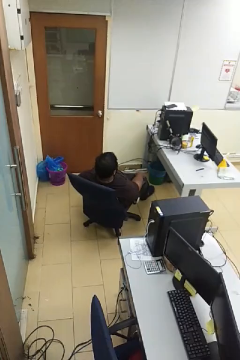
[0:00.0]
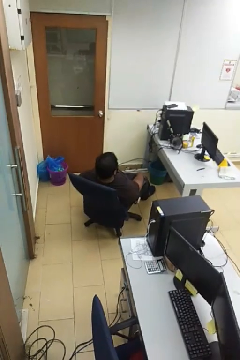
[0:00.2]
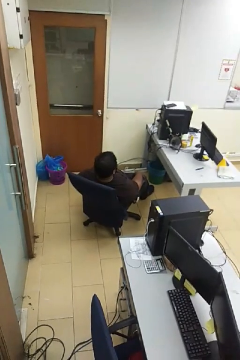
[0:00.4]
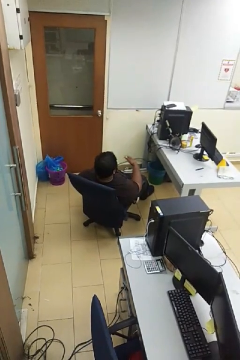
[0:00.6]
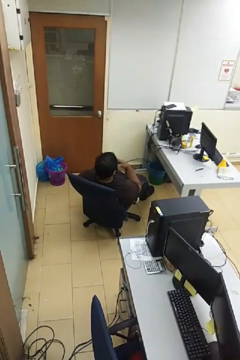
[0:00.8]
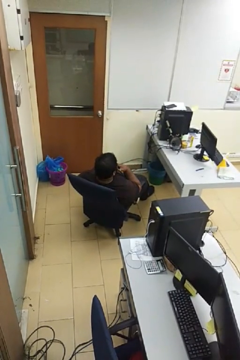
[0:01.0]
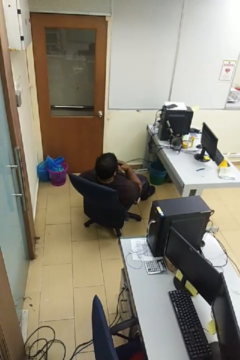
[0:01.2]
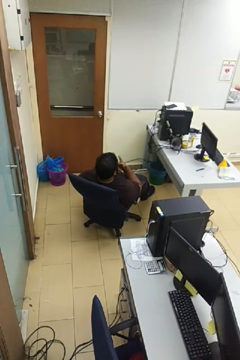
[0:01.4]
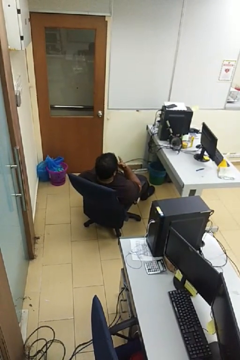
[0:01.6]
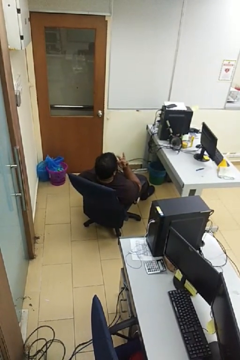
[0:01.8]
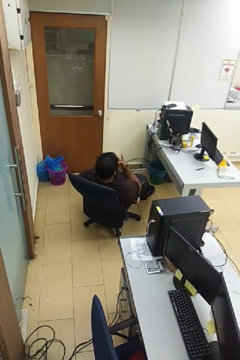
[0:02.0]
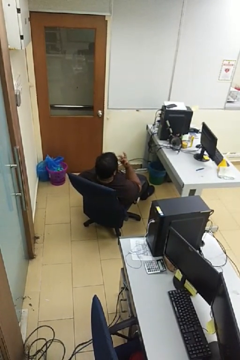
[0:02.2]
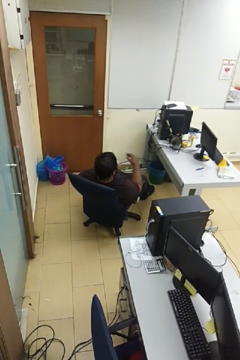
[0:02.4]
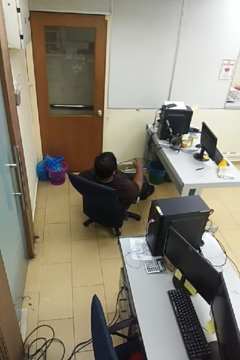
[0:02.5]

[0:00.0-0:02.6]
person licks fingers

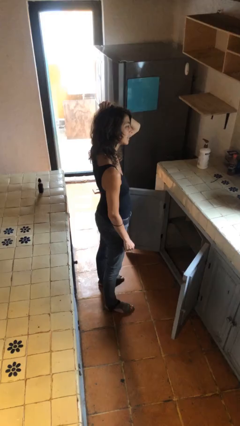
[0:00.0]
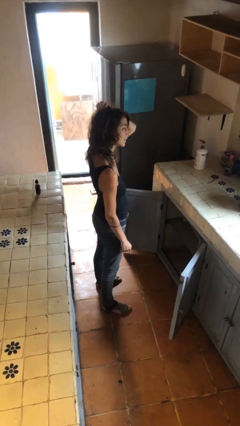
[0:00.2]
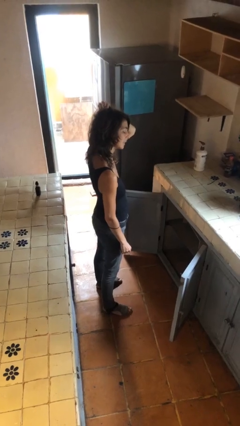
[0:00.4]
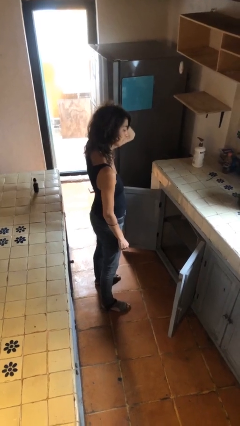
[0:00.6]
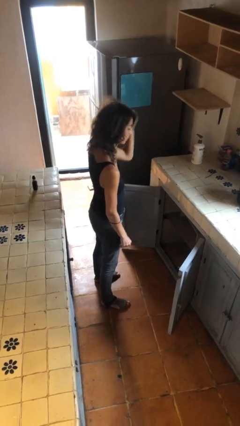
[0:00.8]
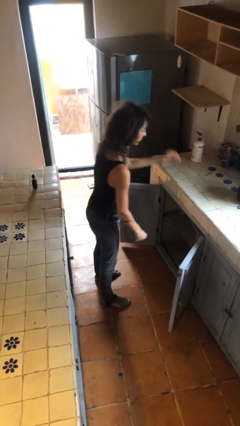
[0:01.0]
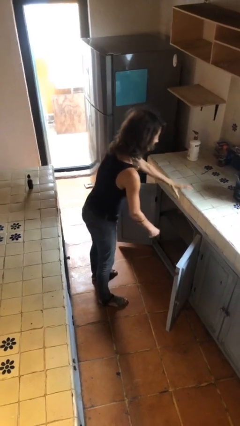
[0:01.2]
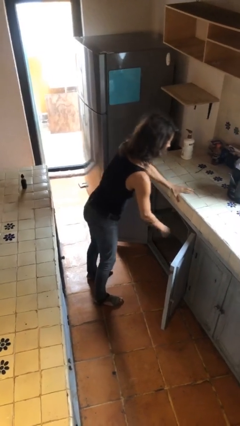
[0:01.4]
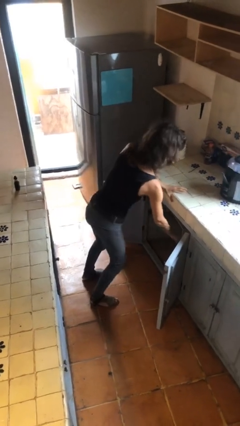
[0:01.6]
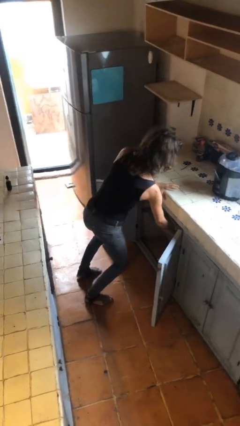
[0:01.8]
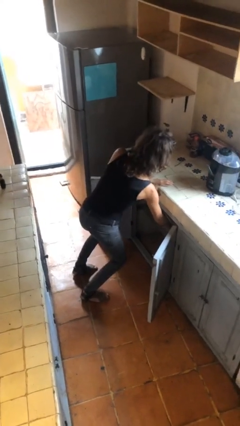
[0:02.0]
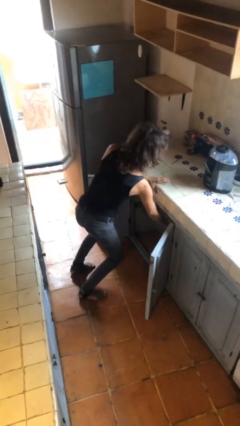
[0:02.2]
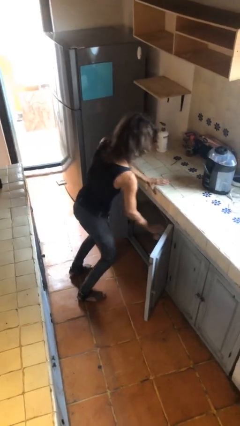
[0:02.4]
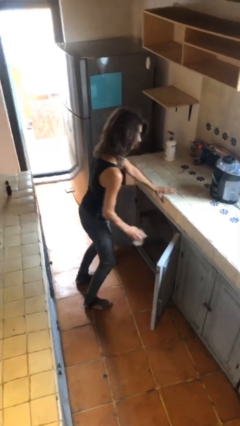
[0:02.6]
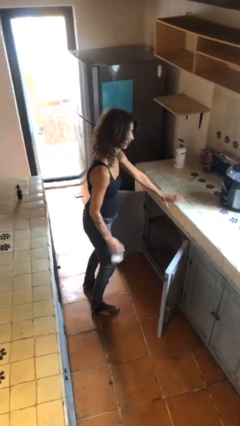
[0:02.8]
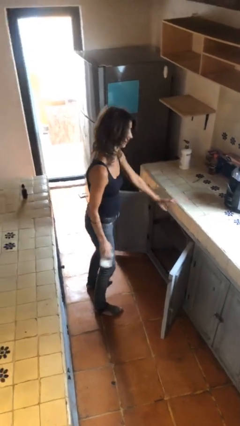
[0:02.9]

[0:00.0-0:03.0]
person picks up object from cabinet

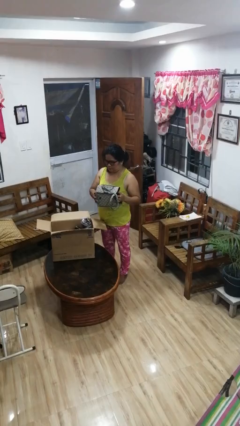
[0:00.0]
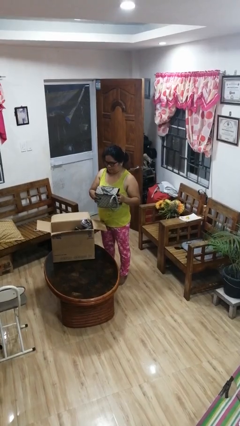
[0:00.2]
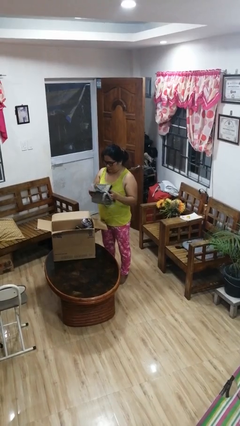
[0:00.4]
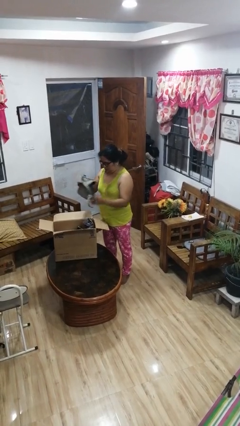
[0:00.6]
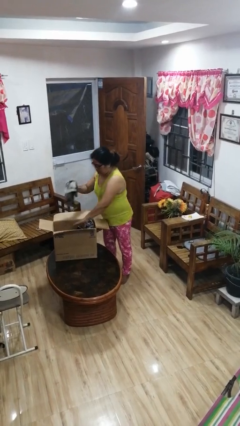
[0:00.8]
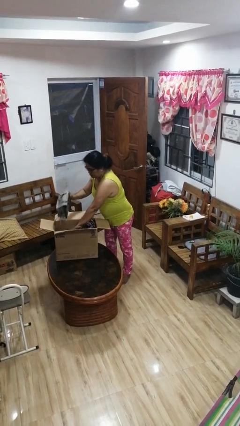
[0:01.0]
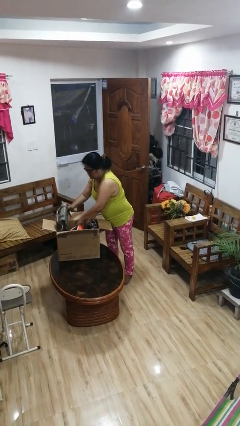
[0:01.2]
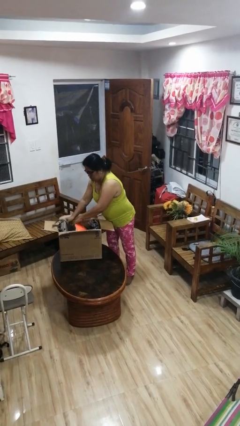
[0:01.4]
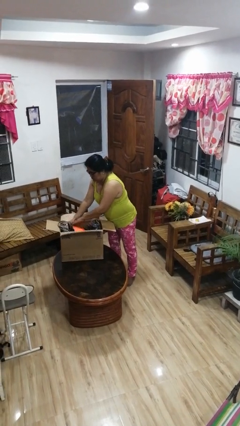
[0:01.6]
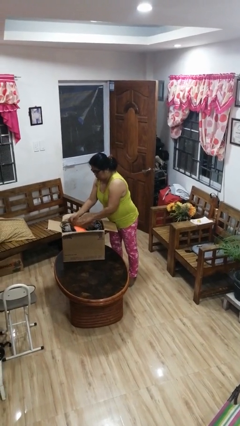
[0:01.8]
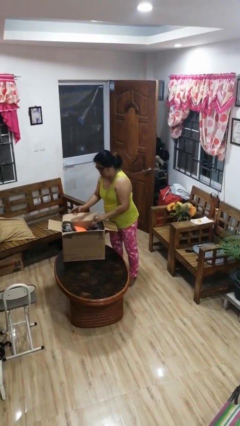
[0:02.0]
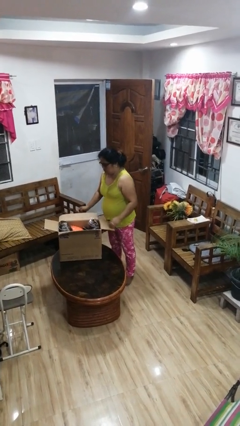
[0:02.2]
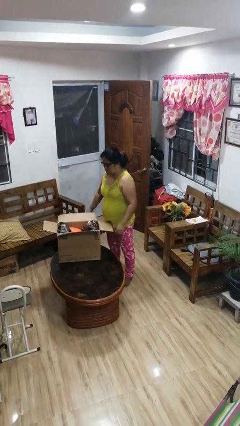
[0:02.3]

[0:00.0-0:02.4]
person puts object into box

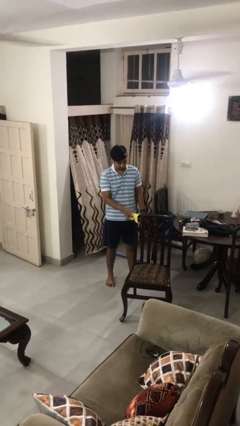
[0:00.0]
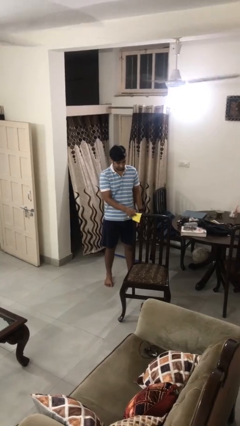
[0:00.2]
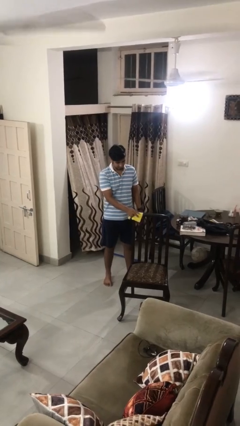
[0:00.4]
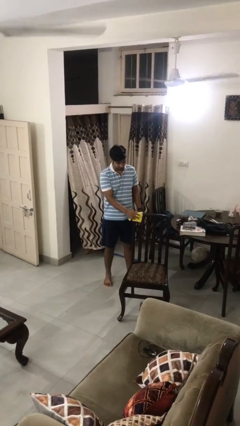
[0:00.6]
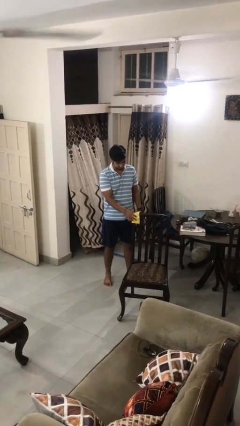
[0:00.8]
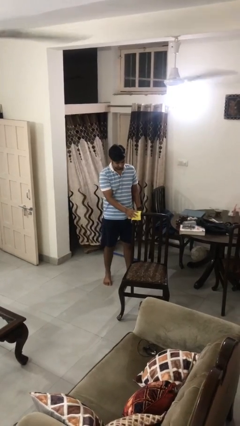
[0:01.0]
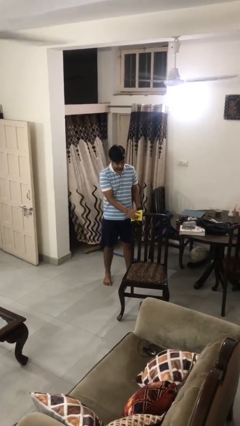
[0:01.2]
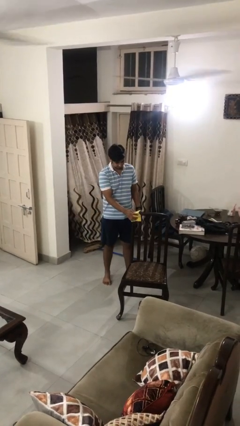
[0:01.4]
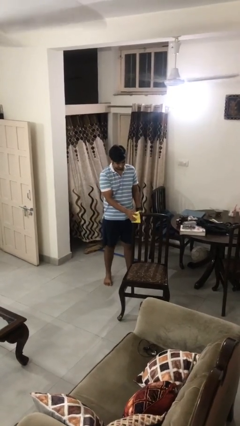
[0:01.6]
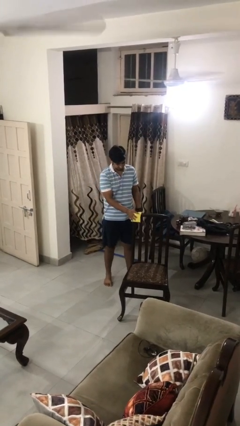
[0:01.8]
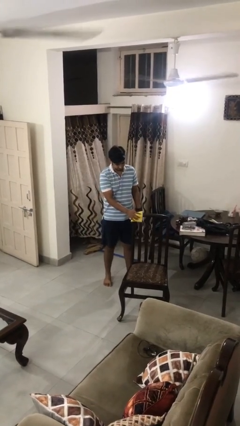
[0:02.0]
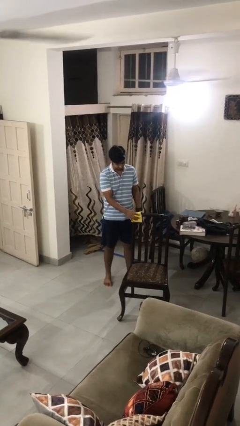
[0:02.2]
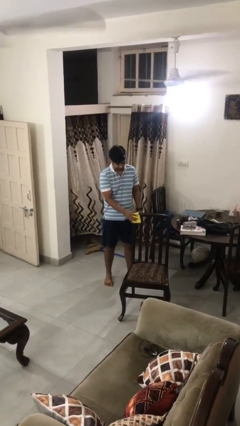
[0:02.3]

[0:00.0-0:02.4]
person dusts furniture

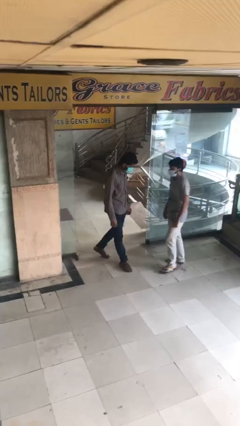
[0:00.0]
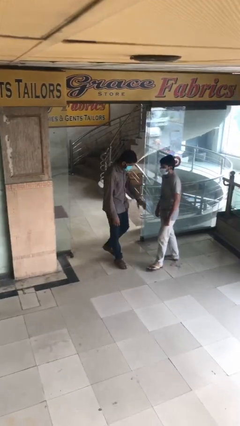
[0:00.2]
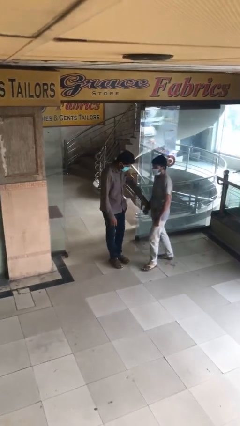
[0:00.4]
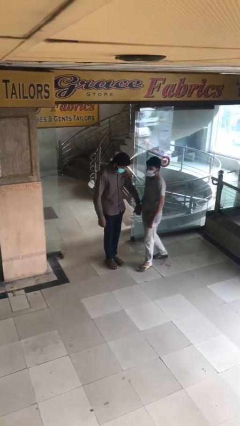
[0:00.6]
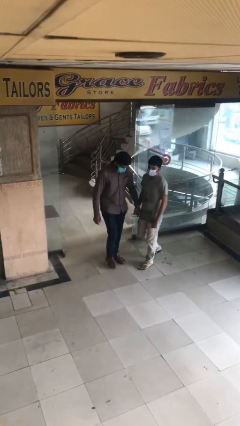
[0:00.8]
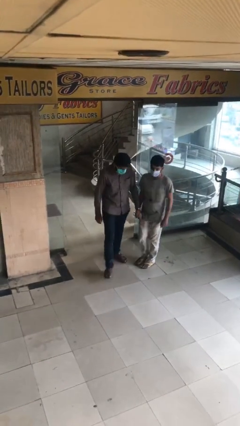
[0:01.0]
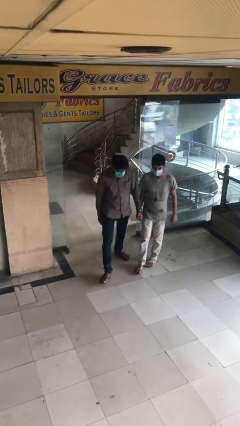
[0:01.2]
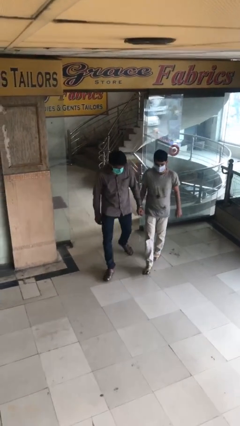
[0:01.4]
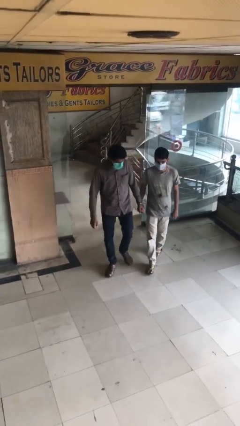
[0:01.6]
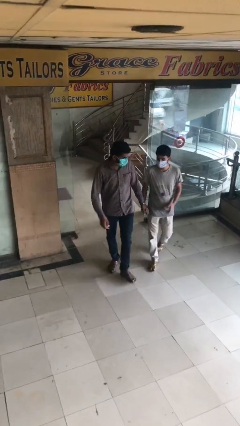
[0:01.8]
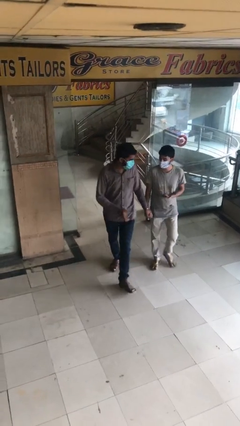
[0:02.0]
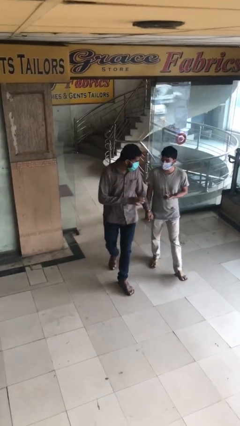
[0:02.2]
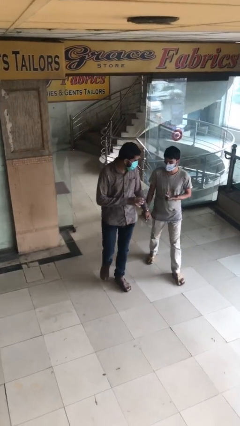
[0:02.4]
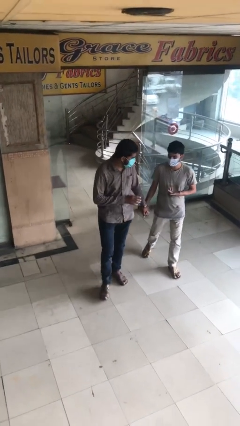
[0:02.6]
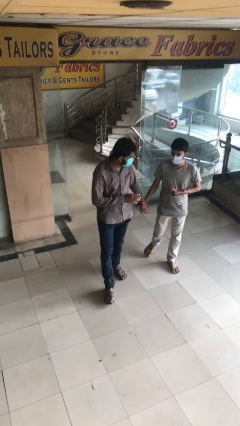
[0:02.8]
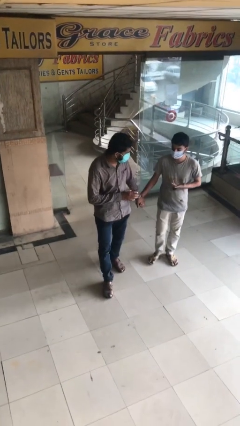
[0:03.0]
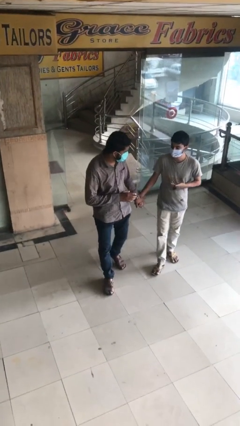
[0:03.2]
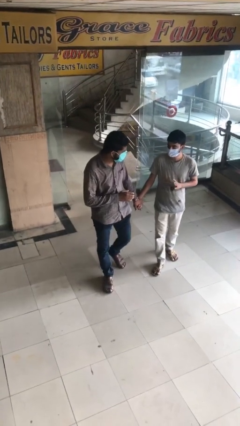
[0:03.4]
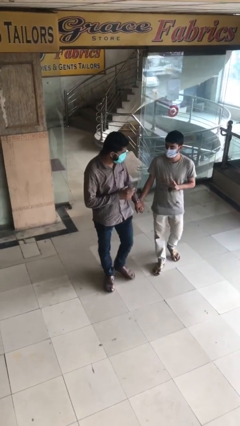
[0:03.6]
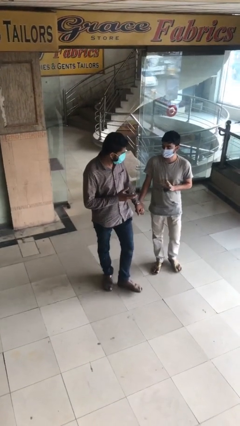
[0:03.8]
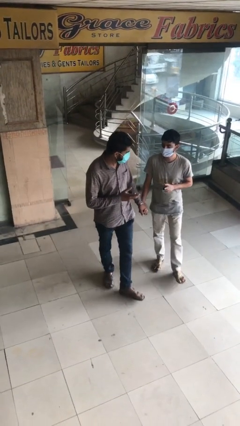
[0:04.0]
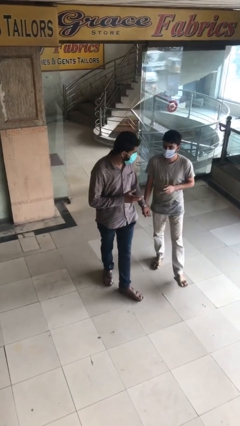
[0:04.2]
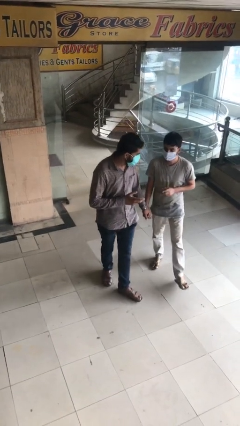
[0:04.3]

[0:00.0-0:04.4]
person holds hand

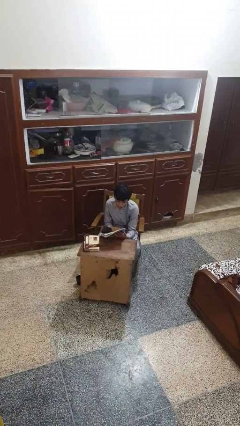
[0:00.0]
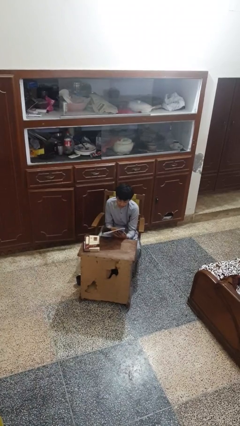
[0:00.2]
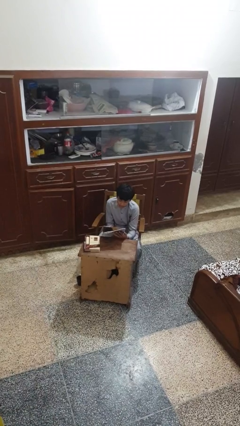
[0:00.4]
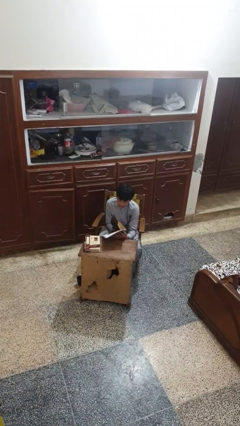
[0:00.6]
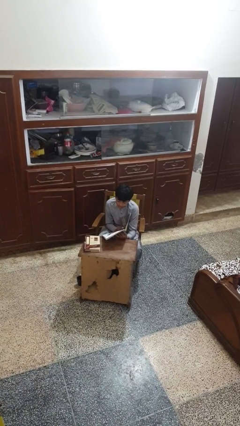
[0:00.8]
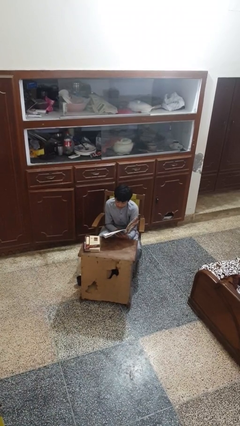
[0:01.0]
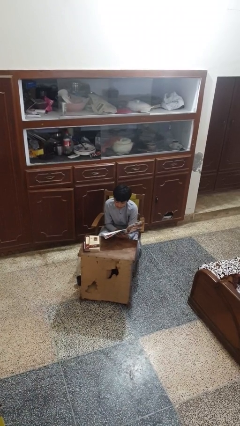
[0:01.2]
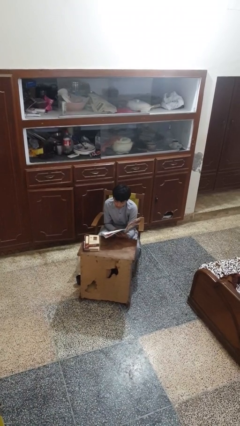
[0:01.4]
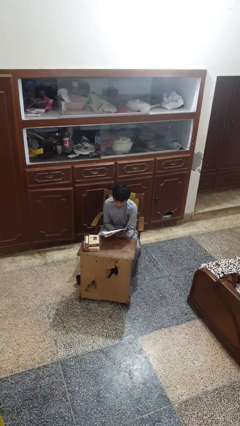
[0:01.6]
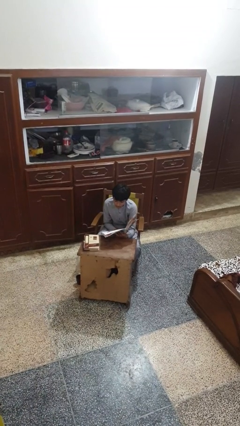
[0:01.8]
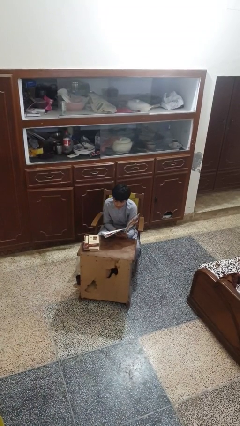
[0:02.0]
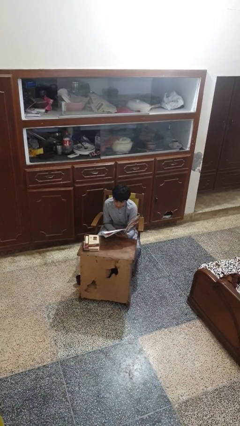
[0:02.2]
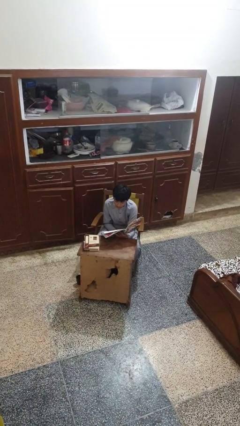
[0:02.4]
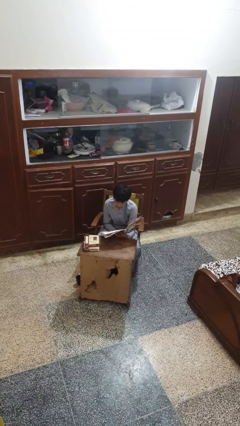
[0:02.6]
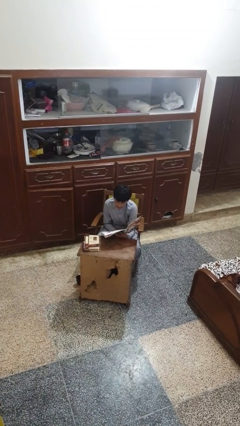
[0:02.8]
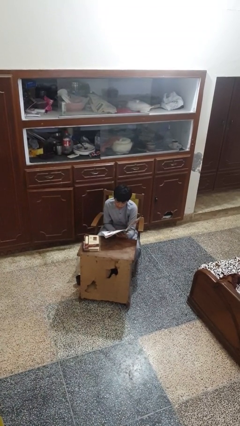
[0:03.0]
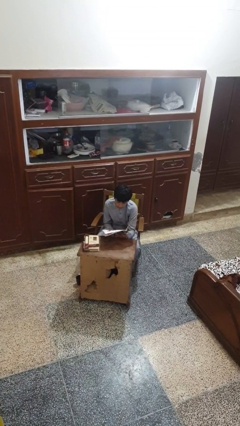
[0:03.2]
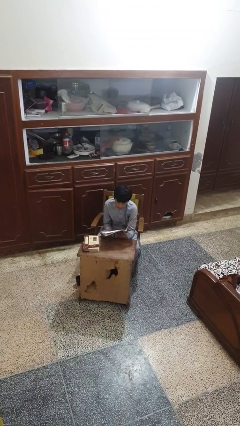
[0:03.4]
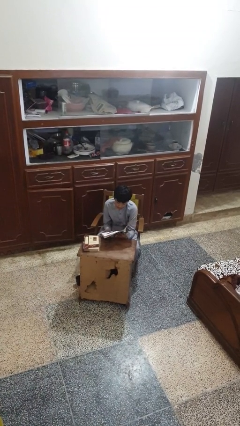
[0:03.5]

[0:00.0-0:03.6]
person reads magazine
